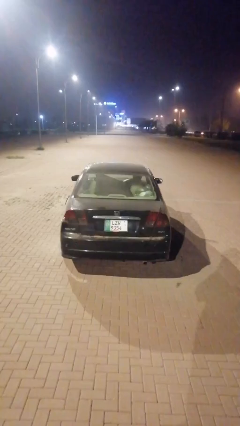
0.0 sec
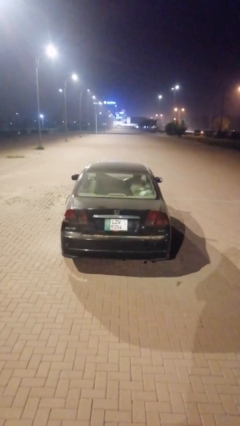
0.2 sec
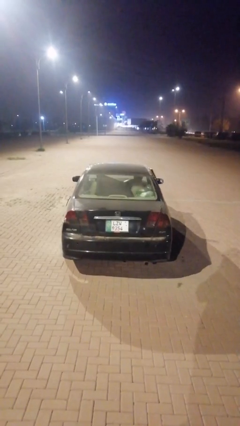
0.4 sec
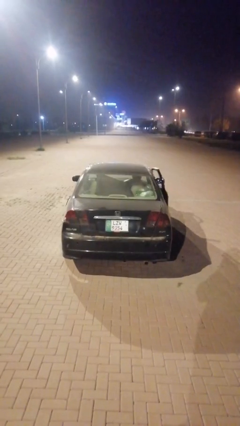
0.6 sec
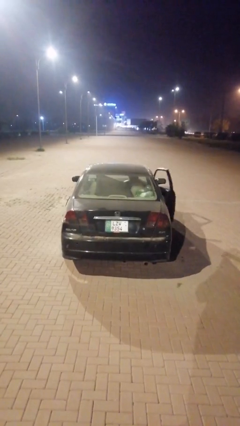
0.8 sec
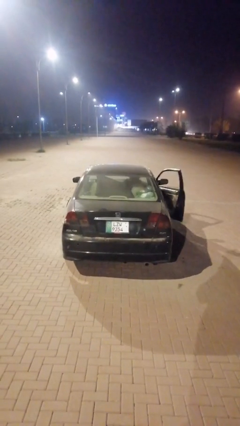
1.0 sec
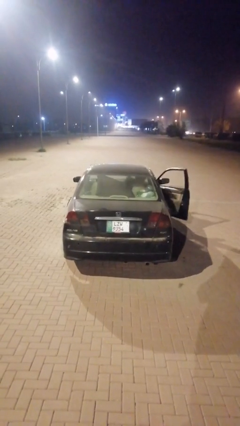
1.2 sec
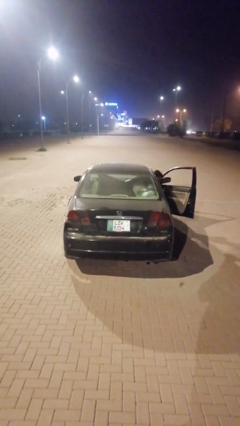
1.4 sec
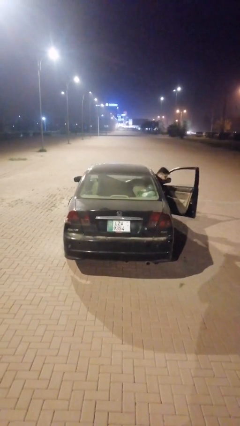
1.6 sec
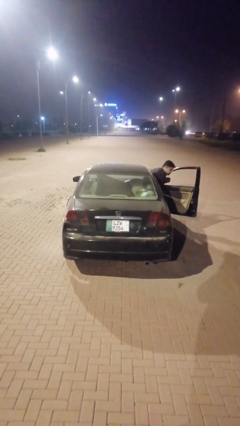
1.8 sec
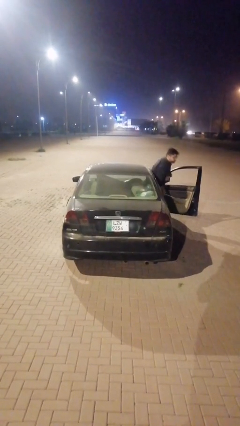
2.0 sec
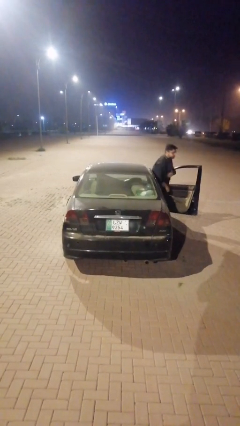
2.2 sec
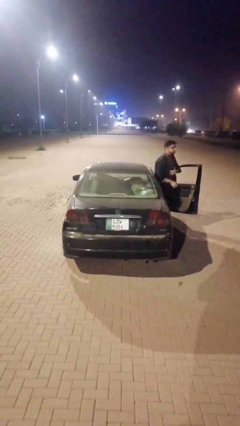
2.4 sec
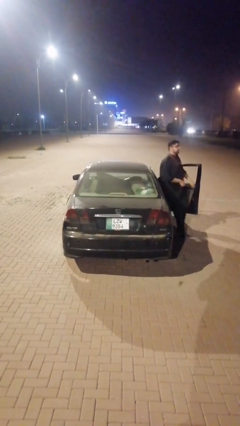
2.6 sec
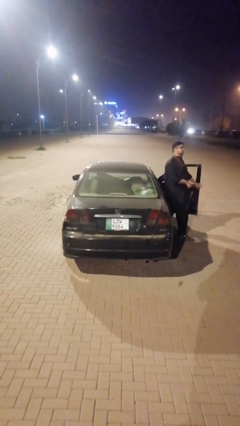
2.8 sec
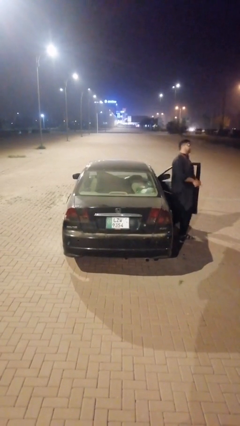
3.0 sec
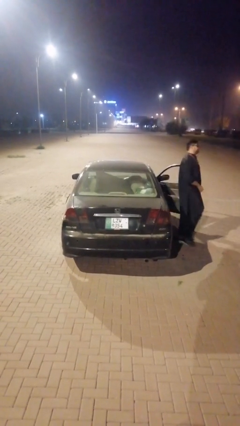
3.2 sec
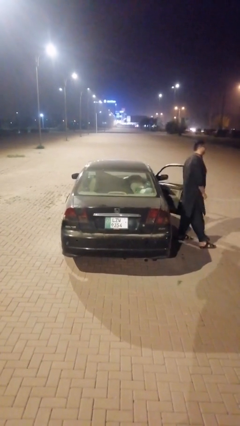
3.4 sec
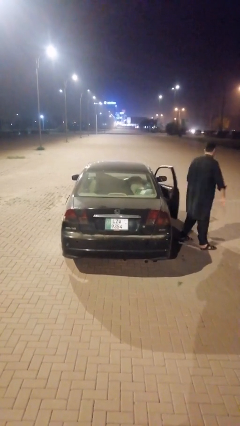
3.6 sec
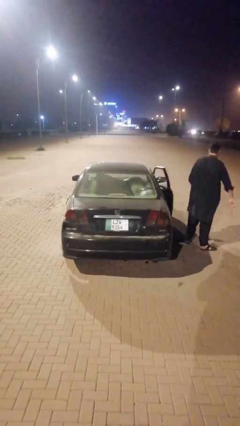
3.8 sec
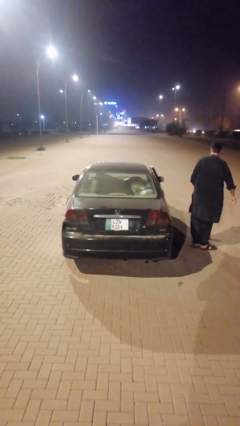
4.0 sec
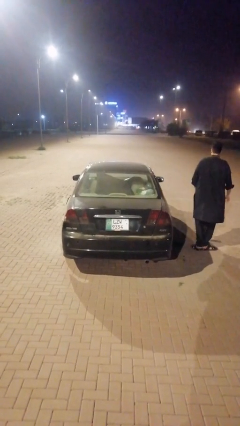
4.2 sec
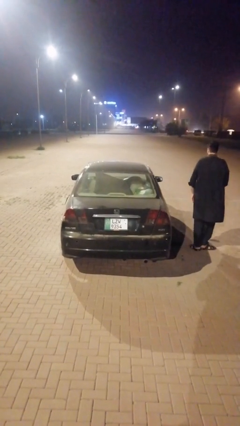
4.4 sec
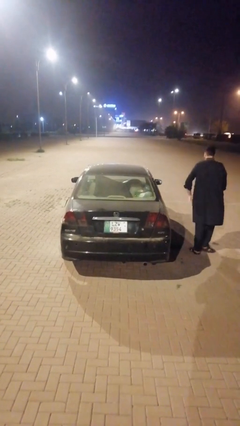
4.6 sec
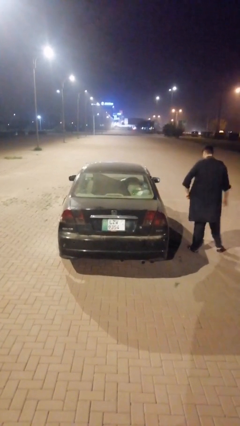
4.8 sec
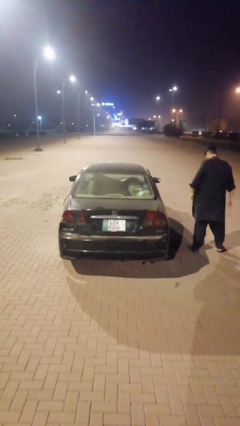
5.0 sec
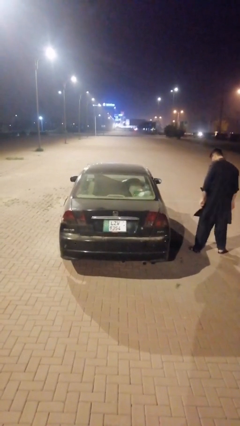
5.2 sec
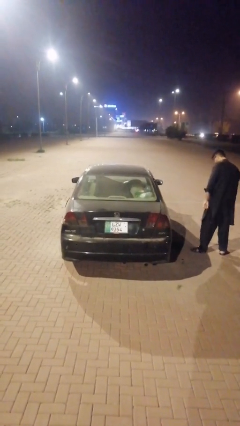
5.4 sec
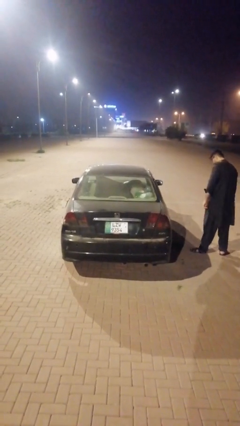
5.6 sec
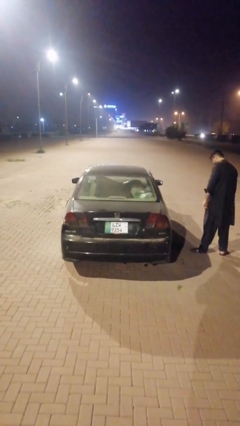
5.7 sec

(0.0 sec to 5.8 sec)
car drops off person

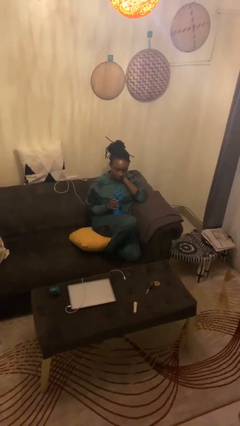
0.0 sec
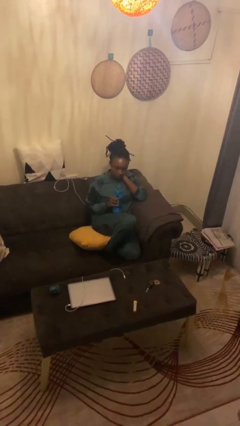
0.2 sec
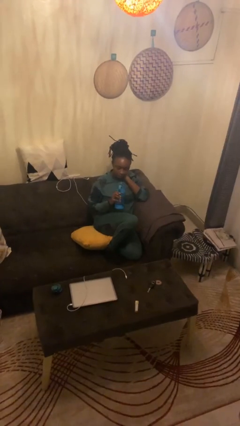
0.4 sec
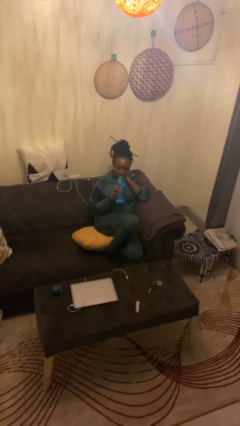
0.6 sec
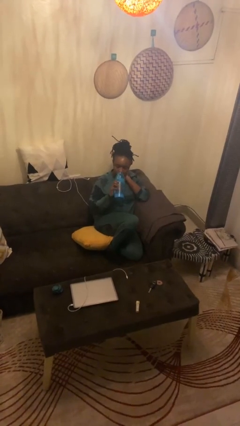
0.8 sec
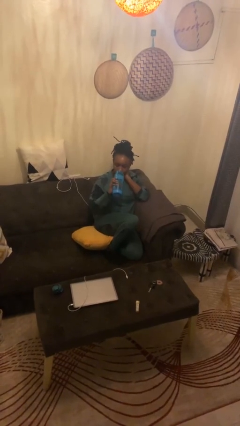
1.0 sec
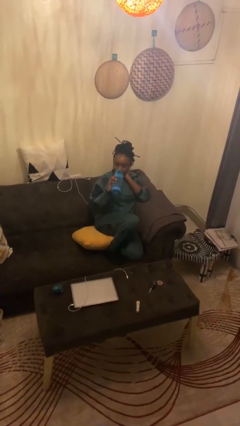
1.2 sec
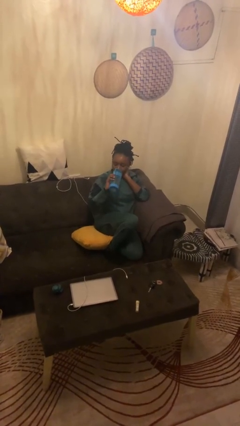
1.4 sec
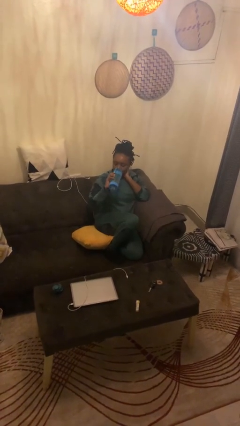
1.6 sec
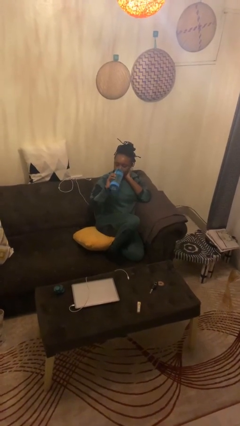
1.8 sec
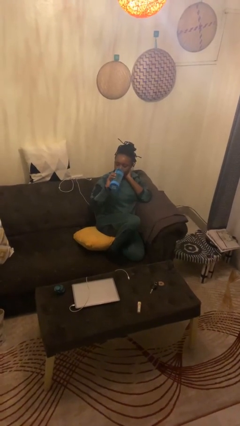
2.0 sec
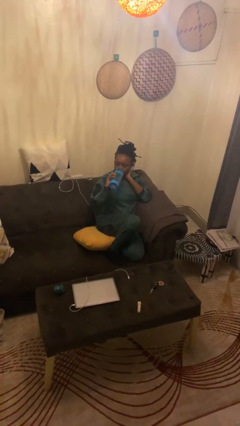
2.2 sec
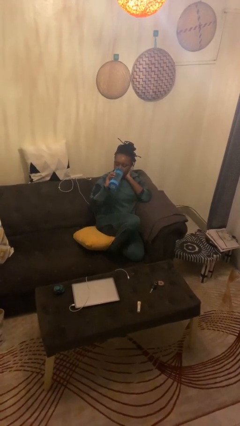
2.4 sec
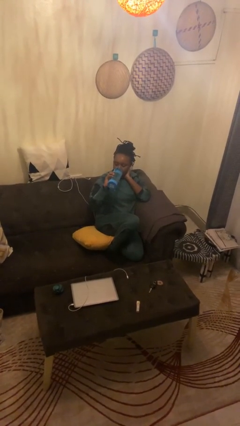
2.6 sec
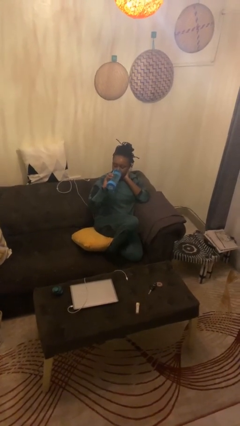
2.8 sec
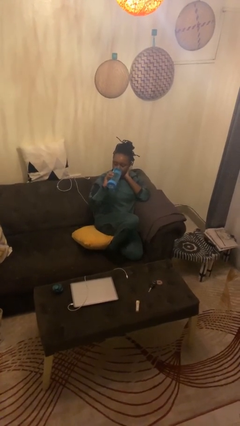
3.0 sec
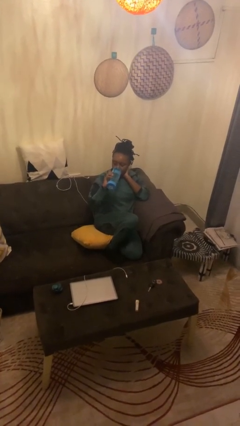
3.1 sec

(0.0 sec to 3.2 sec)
person drinks from bottle

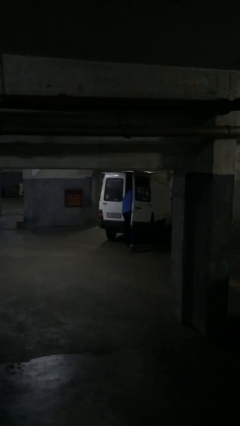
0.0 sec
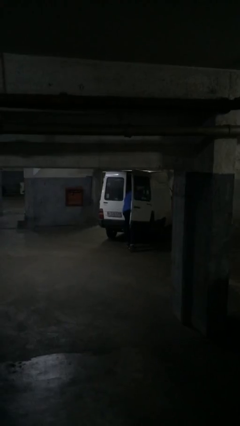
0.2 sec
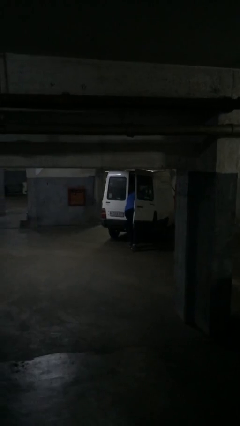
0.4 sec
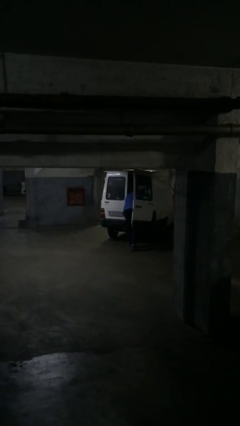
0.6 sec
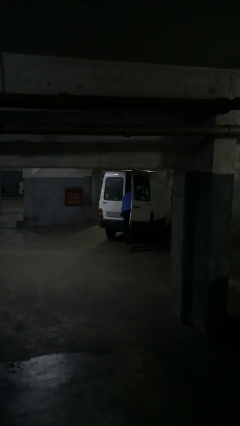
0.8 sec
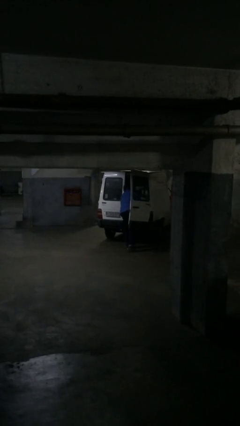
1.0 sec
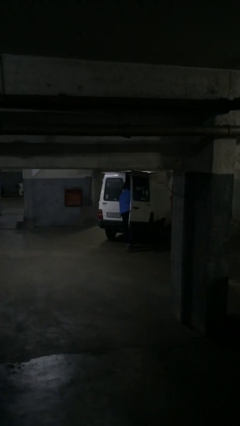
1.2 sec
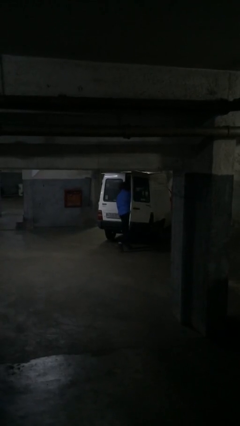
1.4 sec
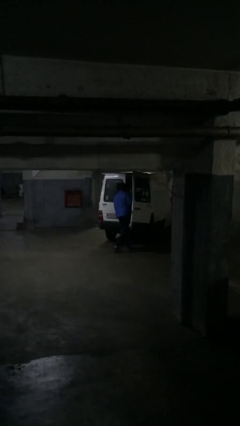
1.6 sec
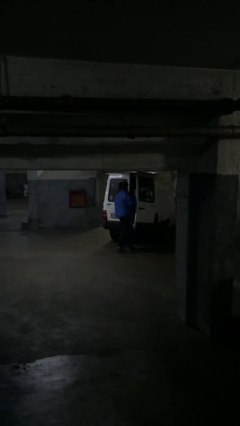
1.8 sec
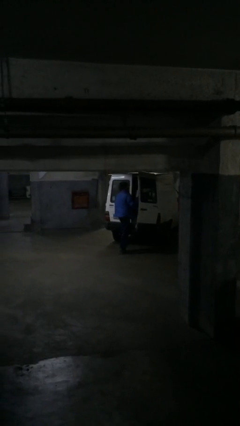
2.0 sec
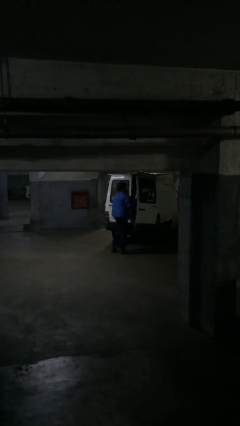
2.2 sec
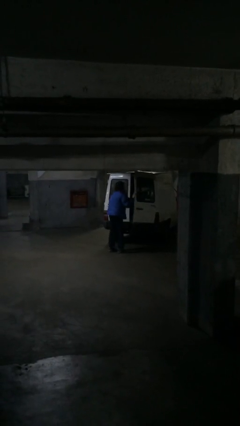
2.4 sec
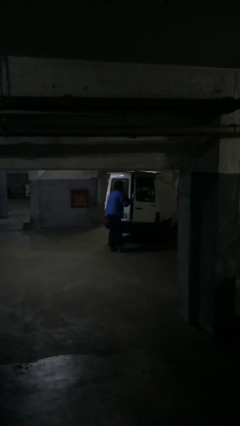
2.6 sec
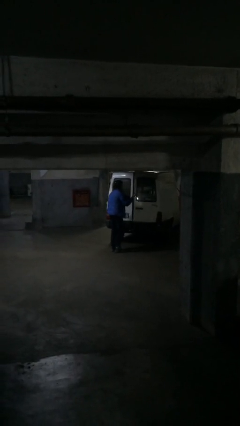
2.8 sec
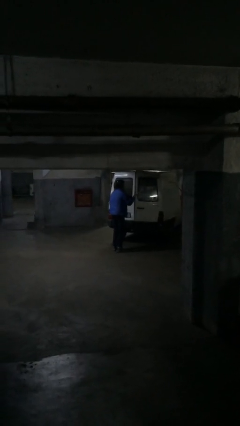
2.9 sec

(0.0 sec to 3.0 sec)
person unloads car

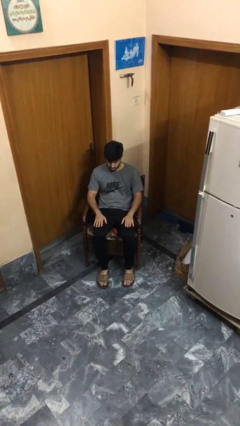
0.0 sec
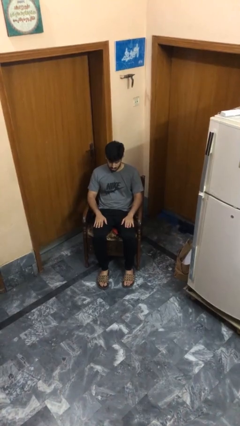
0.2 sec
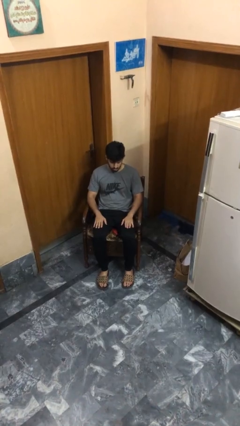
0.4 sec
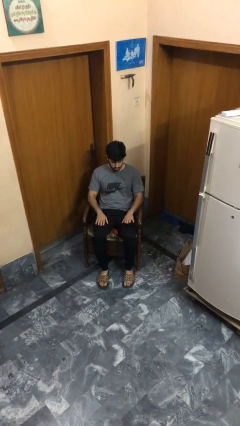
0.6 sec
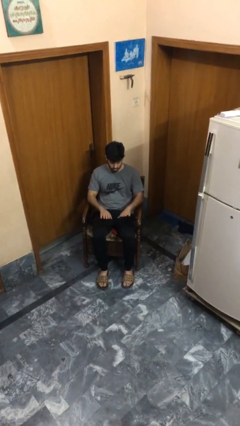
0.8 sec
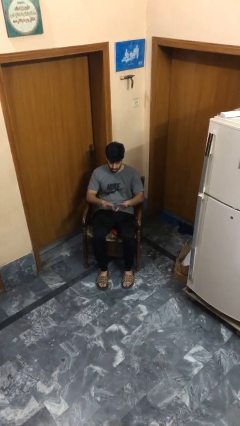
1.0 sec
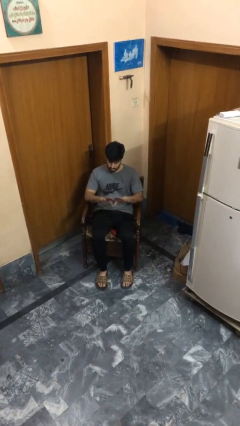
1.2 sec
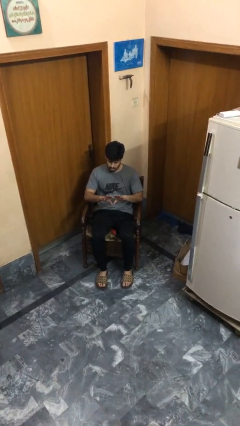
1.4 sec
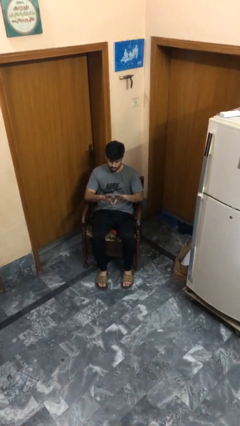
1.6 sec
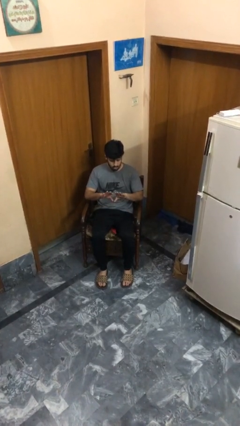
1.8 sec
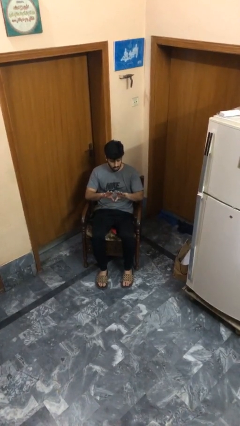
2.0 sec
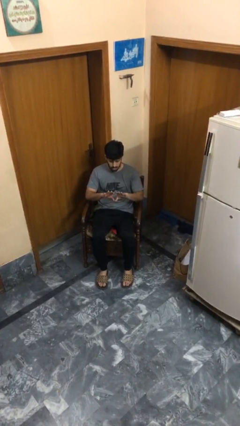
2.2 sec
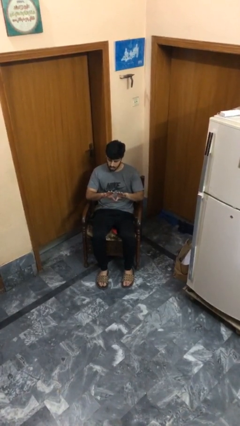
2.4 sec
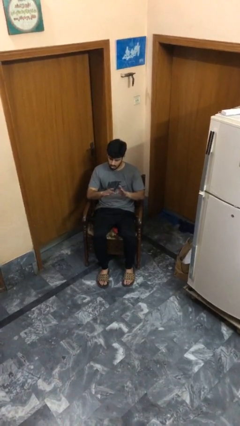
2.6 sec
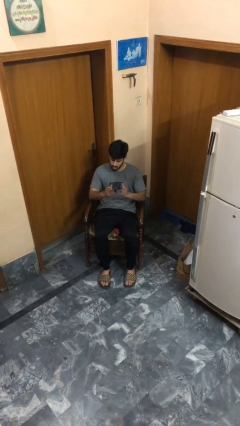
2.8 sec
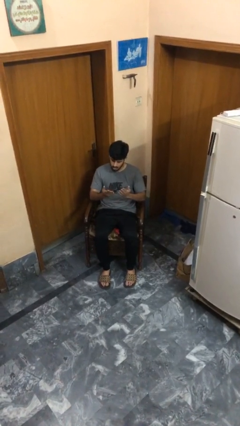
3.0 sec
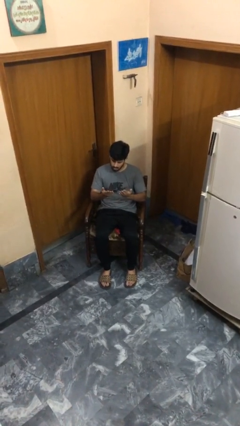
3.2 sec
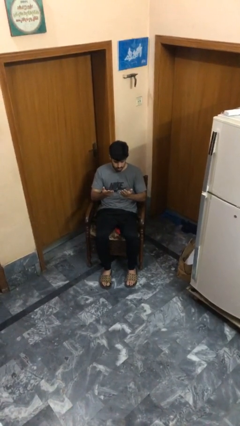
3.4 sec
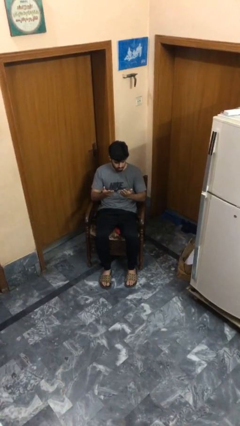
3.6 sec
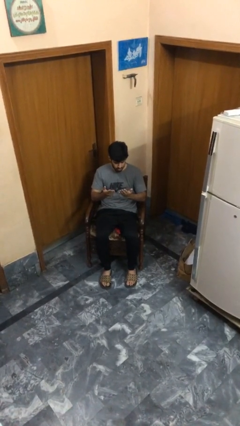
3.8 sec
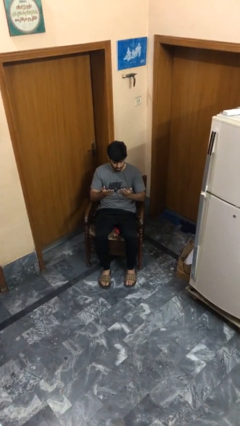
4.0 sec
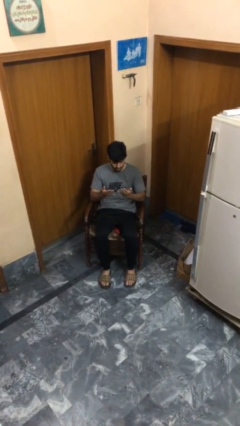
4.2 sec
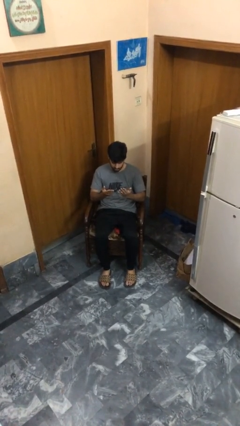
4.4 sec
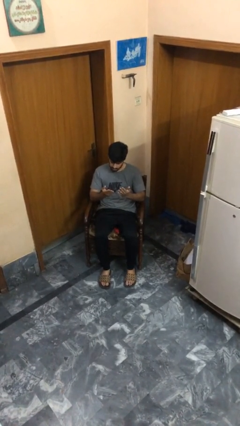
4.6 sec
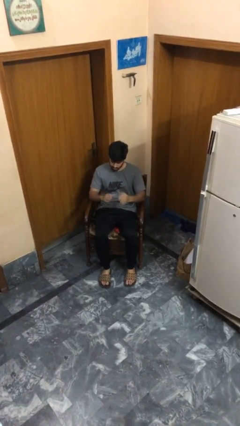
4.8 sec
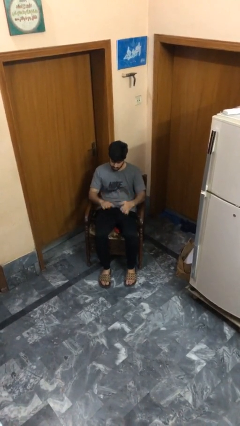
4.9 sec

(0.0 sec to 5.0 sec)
person looks at hands in lap

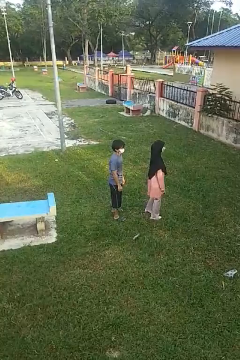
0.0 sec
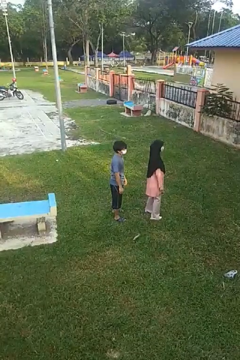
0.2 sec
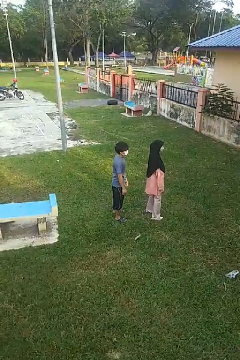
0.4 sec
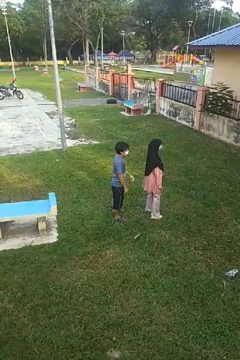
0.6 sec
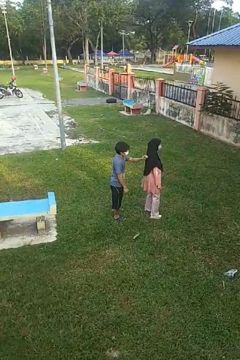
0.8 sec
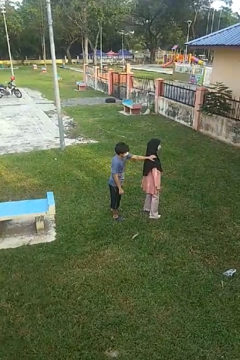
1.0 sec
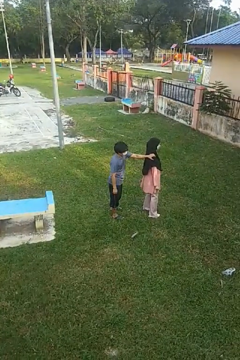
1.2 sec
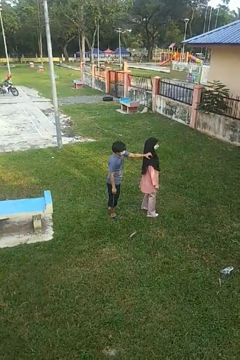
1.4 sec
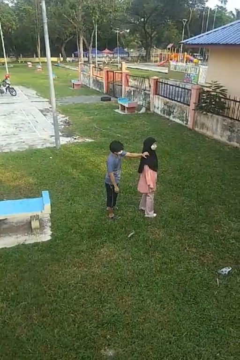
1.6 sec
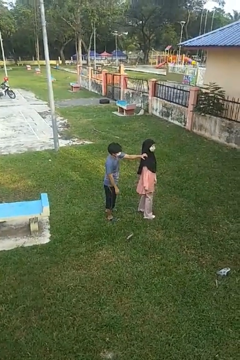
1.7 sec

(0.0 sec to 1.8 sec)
person grabs person by shoulder
